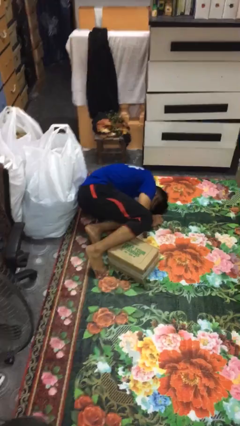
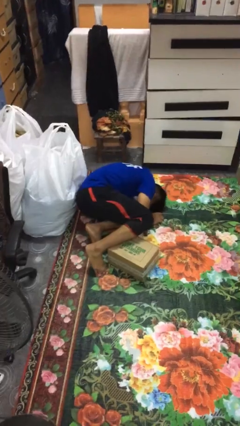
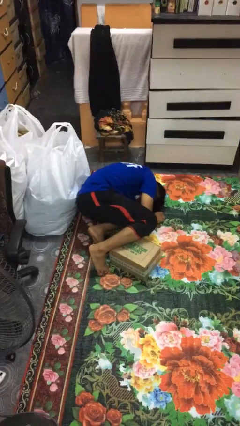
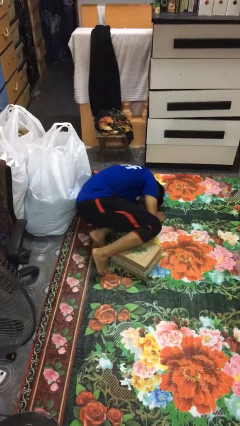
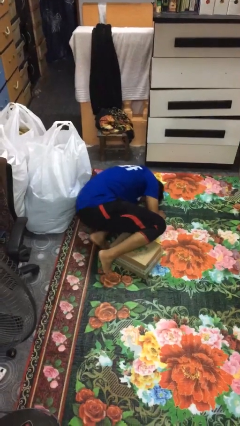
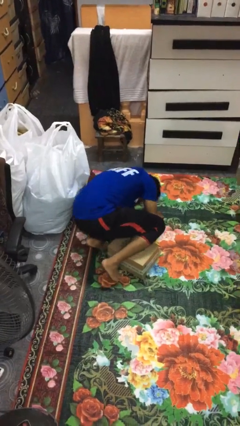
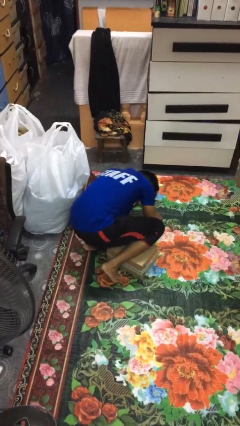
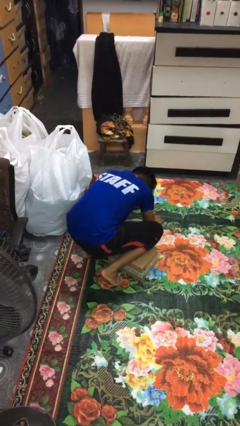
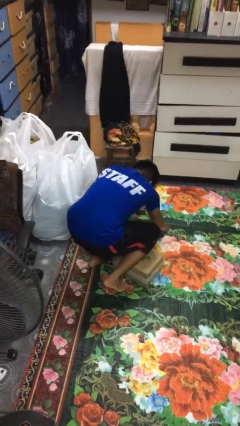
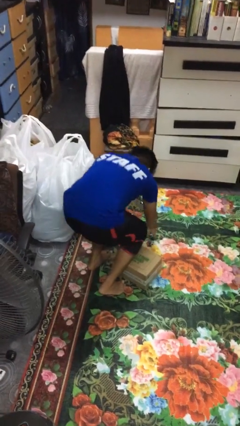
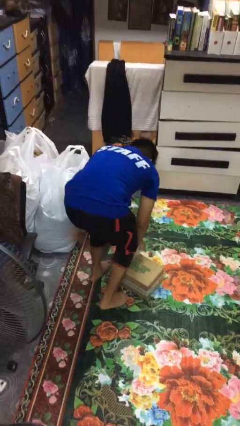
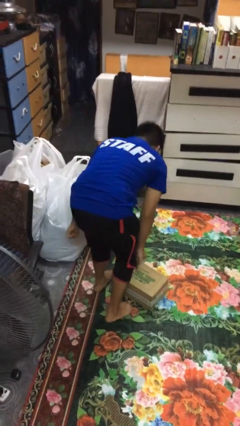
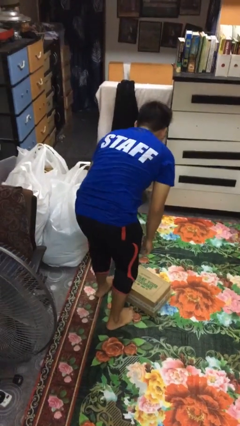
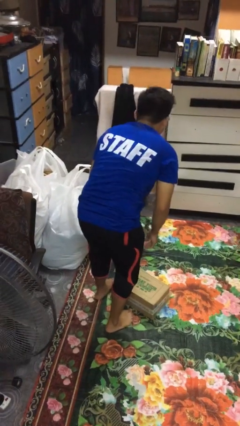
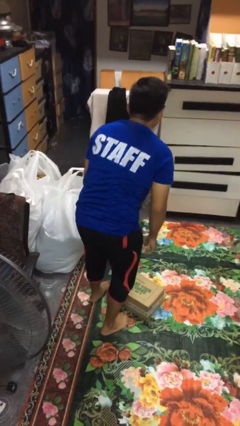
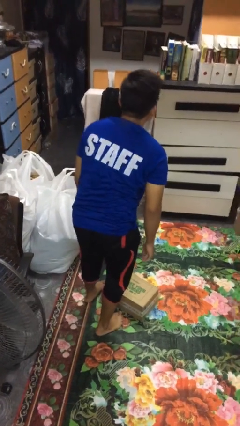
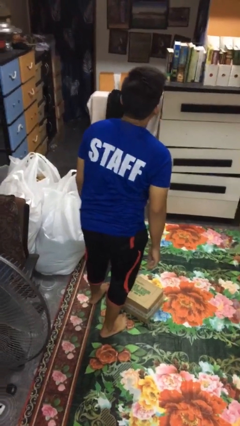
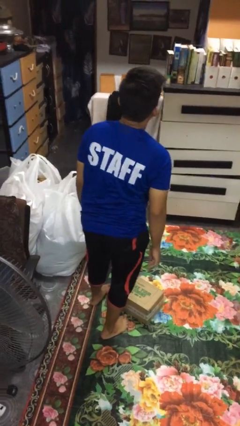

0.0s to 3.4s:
person stands up from floor

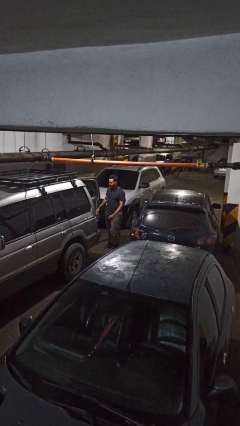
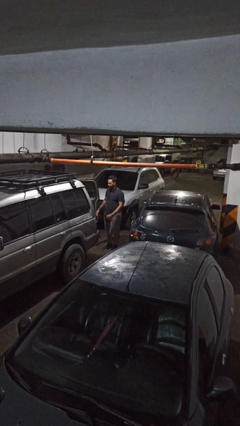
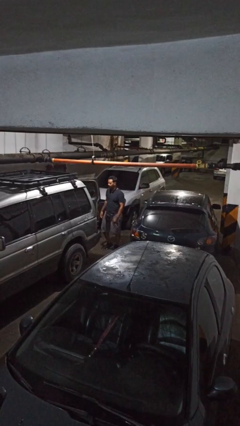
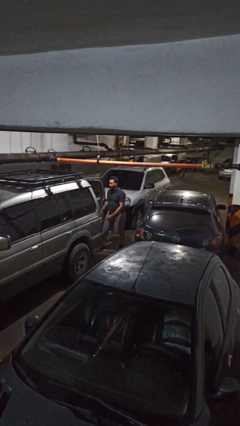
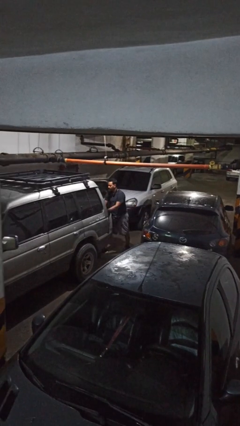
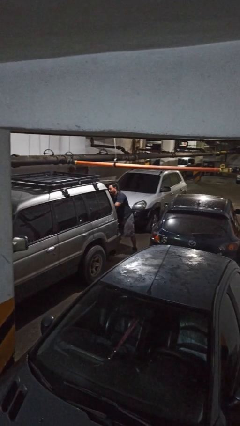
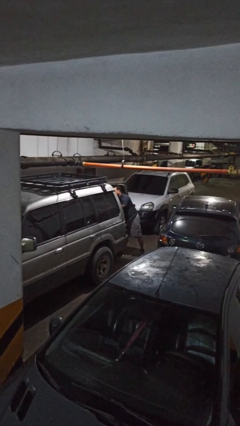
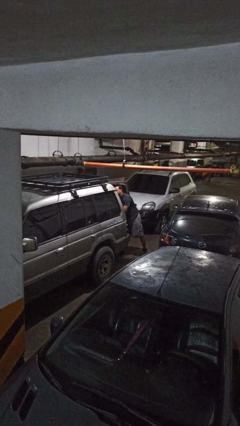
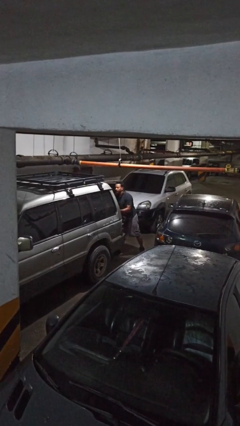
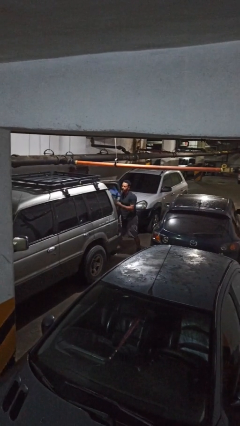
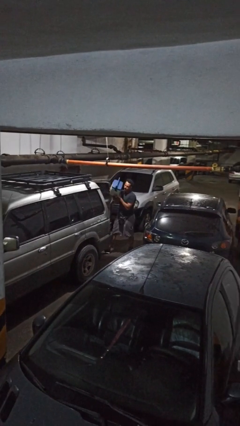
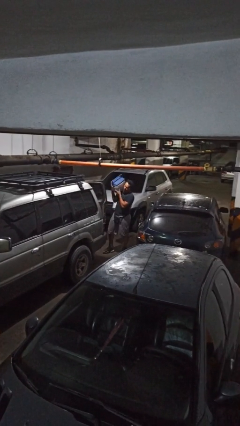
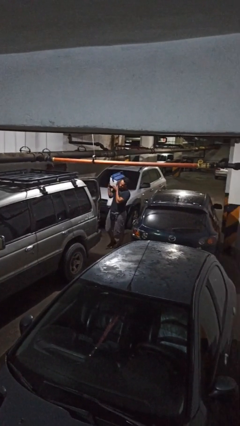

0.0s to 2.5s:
person unloads car

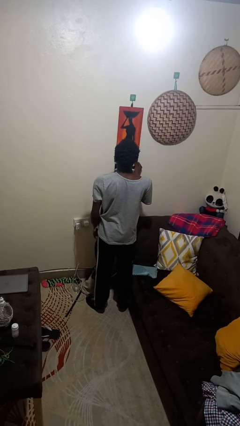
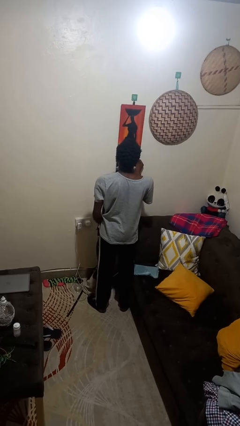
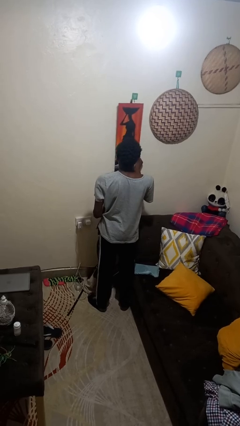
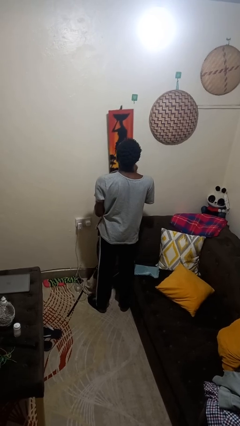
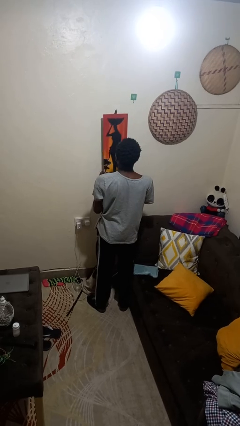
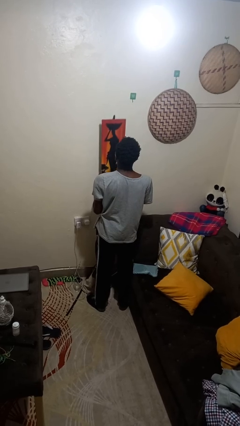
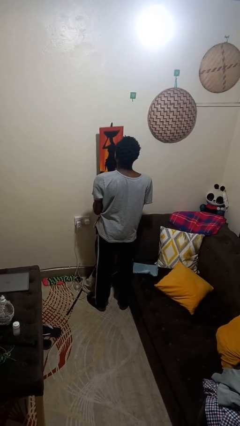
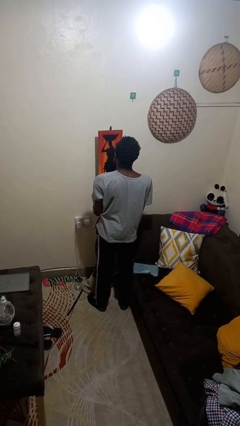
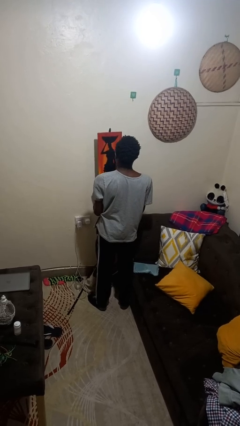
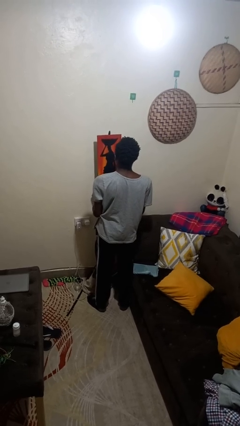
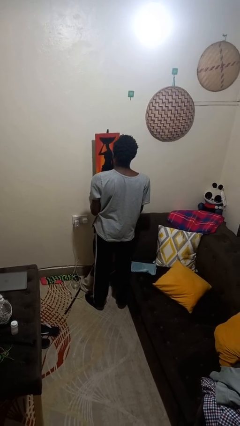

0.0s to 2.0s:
person takes down picture frame

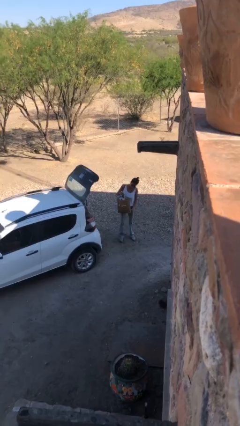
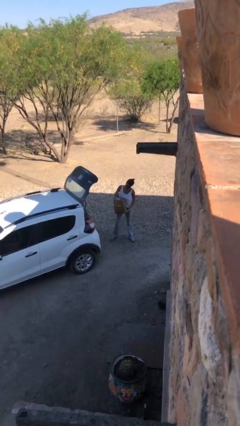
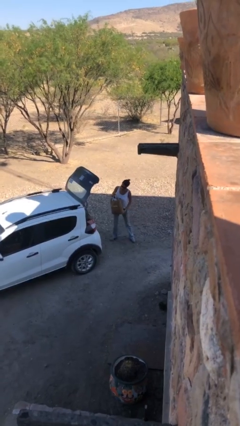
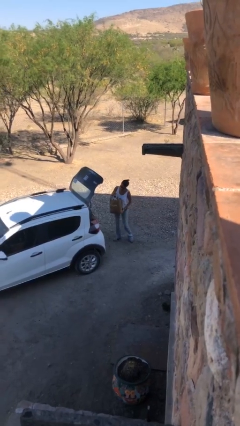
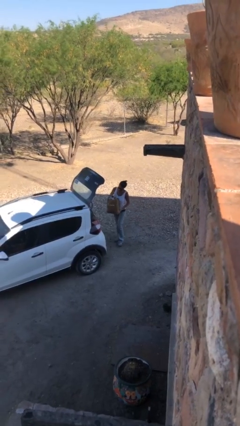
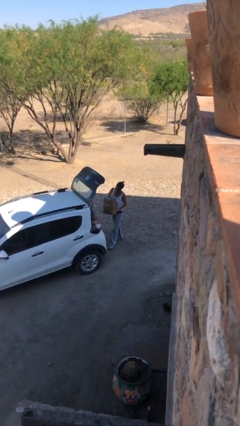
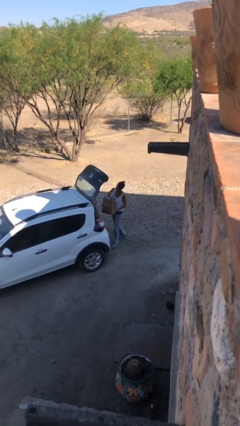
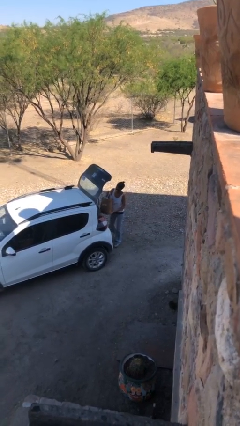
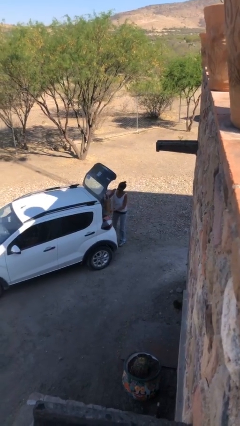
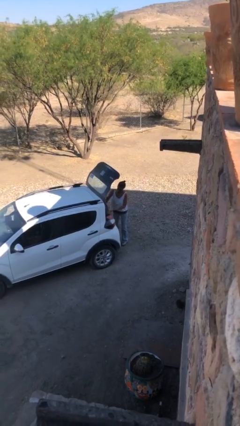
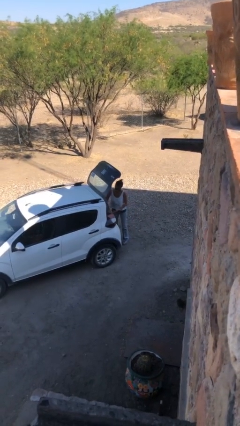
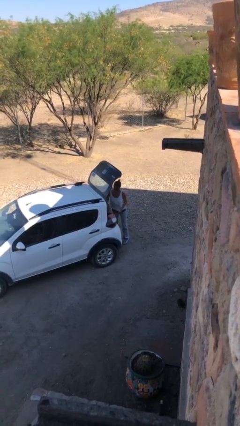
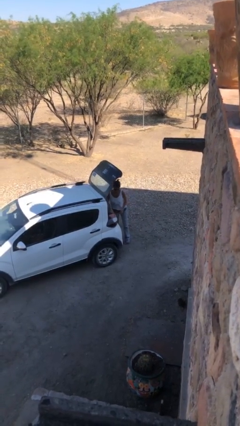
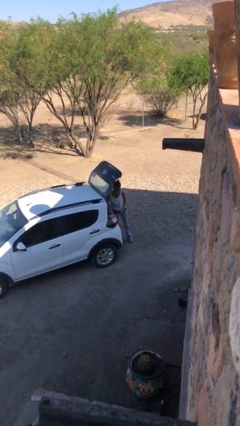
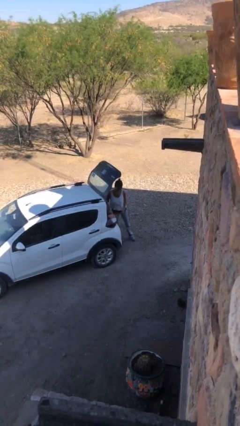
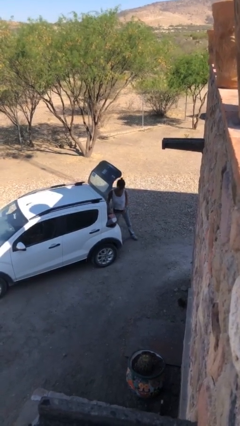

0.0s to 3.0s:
person loads car

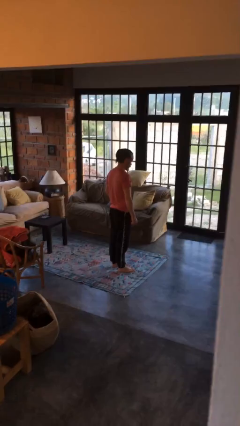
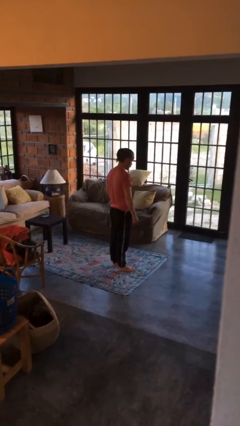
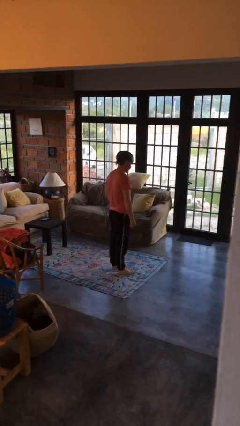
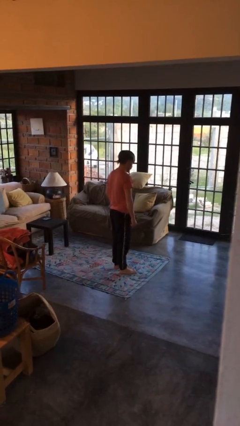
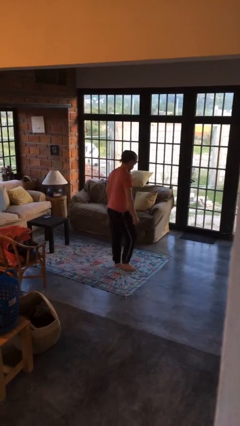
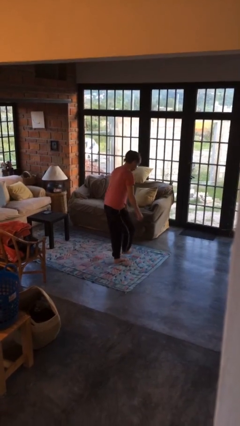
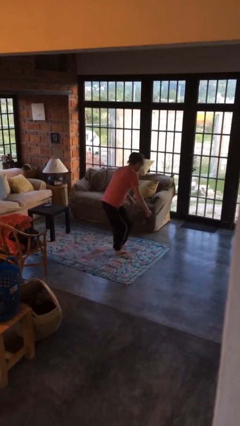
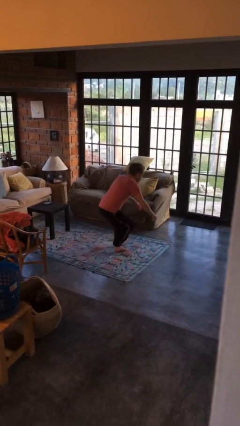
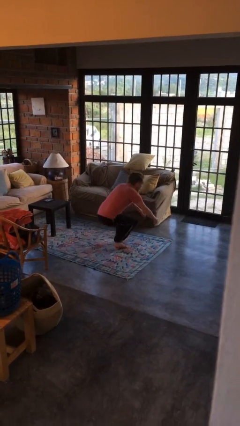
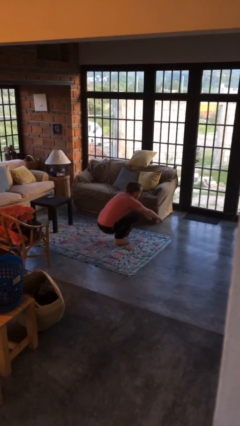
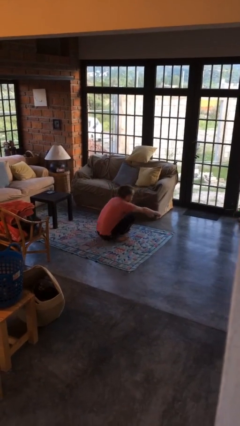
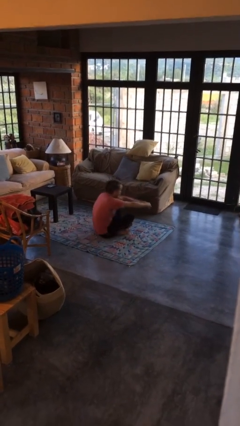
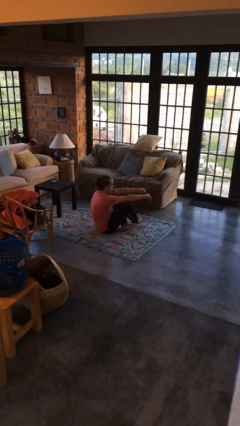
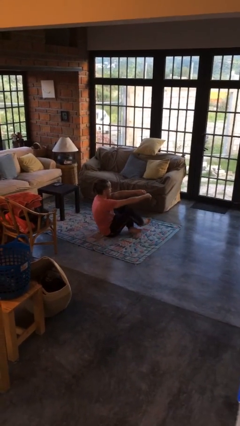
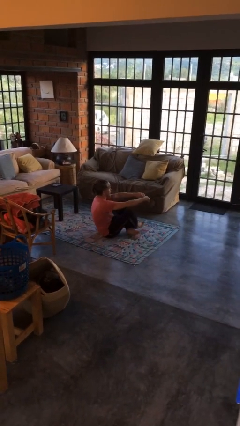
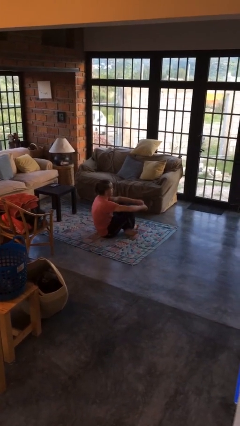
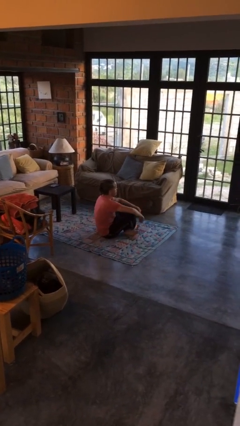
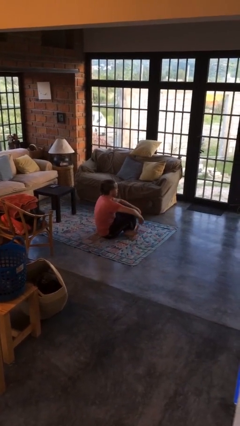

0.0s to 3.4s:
person sits crisscross

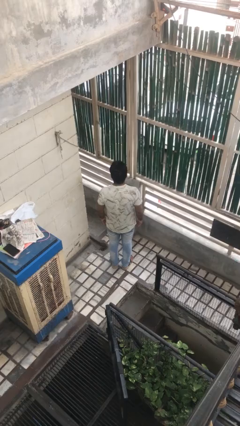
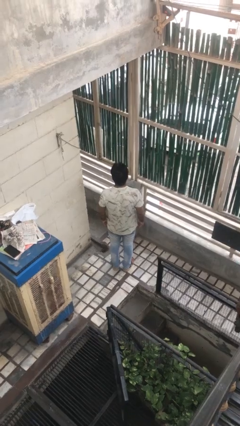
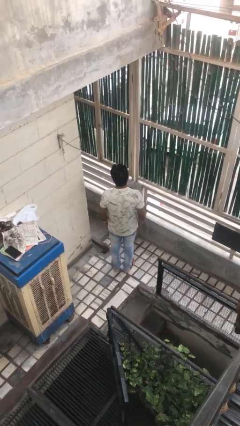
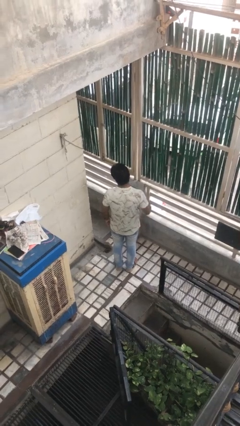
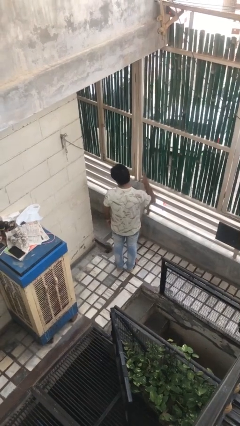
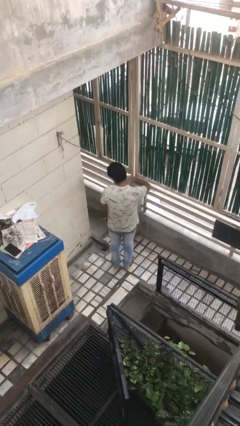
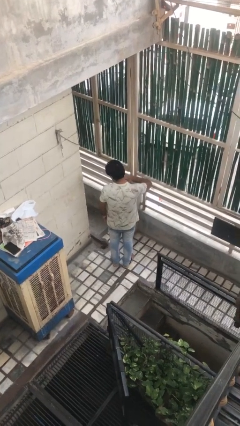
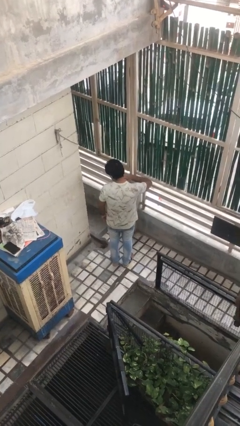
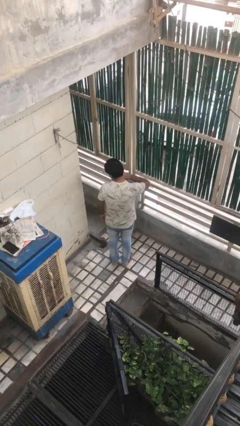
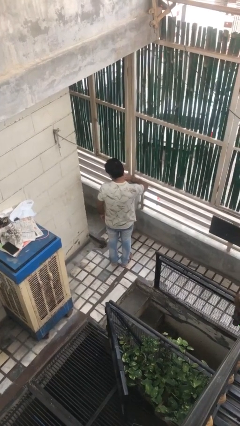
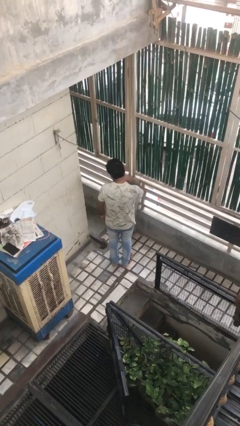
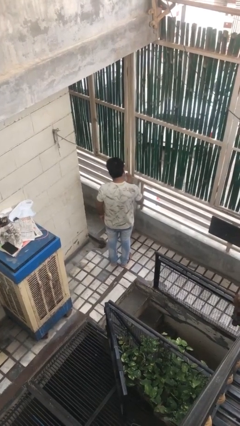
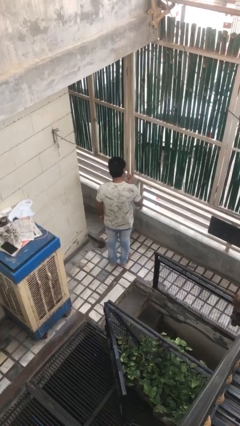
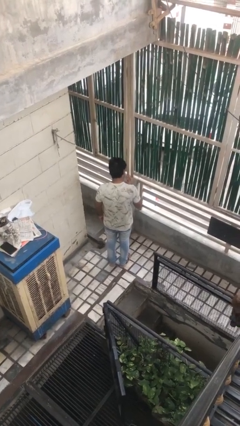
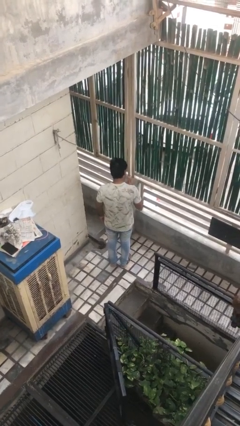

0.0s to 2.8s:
person swats bug

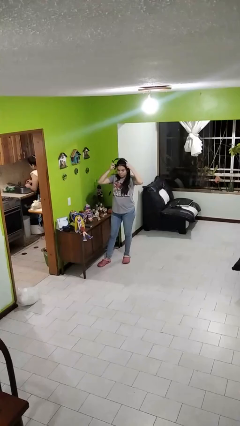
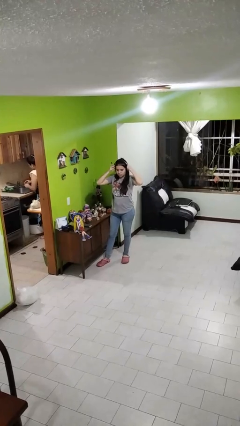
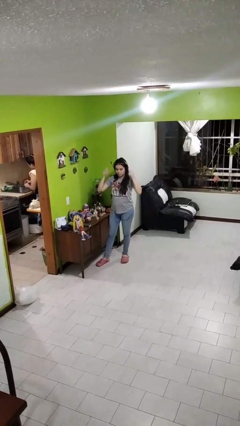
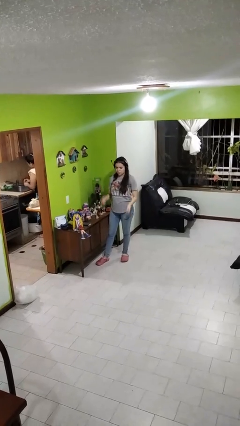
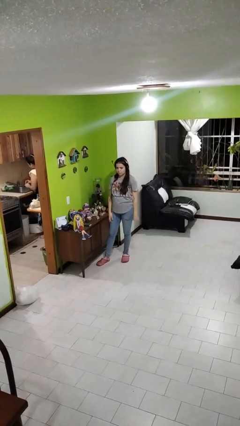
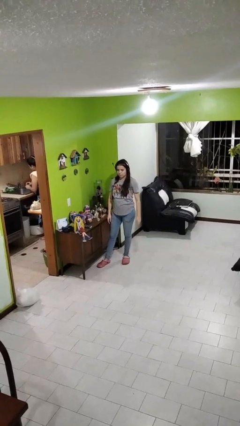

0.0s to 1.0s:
person puts on headphones
